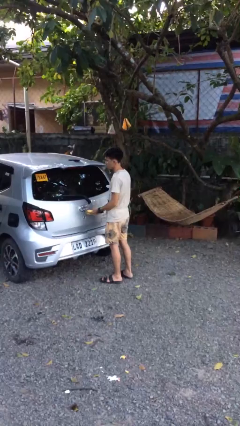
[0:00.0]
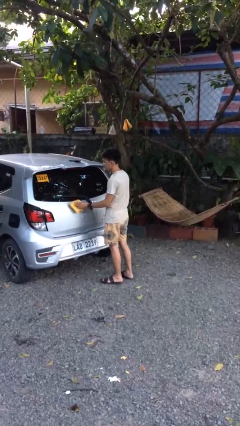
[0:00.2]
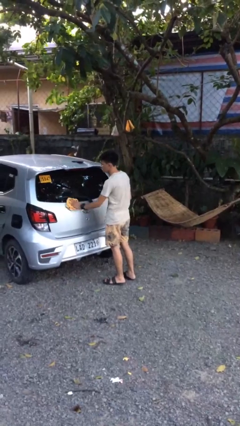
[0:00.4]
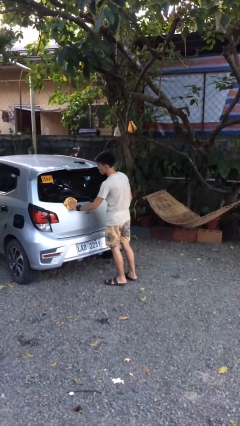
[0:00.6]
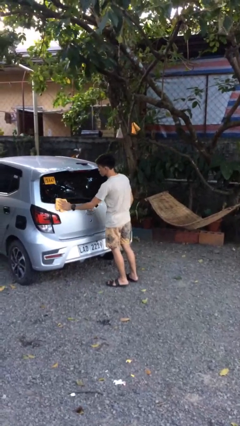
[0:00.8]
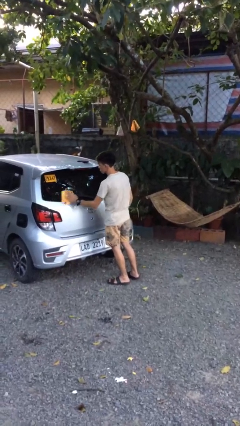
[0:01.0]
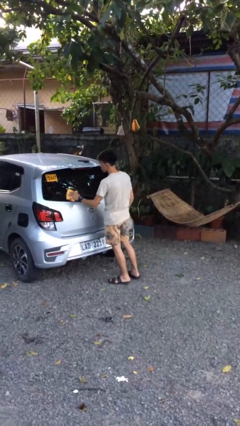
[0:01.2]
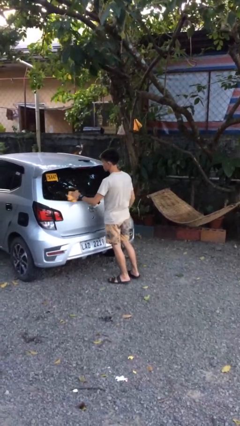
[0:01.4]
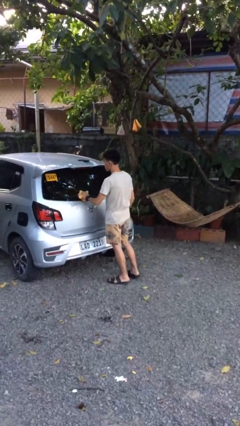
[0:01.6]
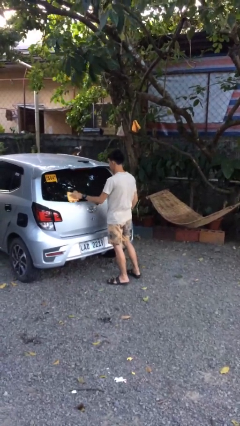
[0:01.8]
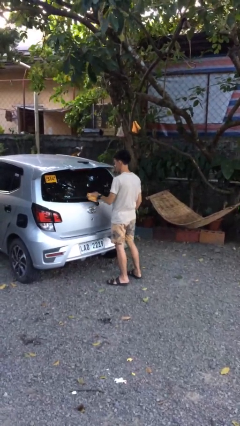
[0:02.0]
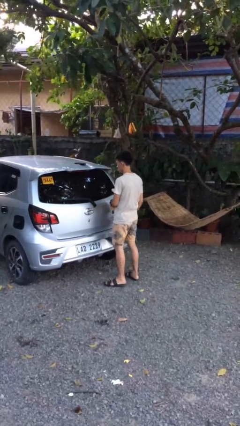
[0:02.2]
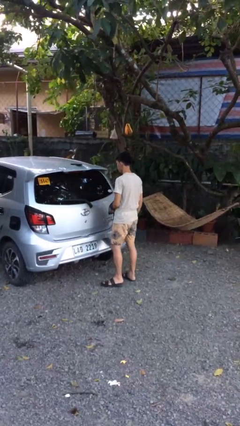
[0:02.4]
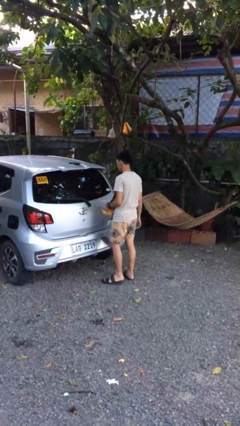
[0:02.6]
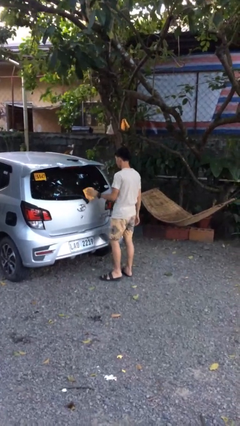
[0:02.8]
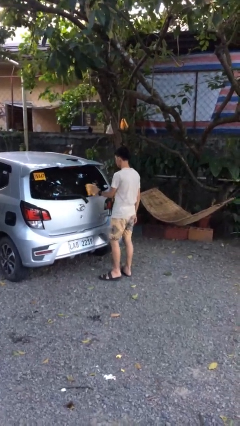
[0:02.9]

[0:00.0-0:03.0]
person polishes car with rag

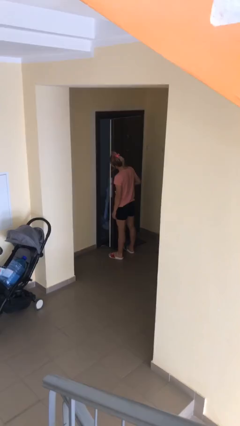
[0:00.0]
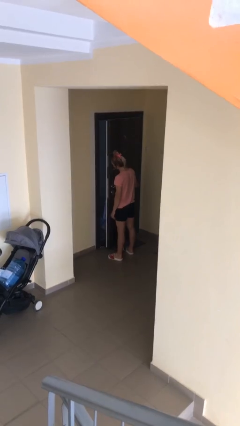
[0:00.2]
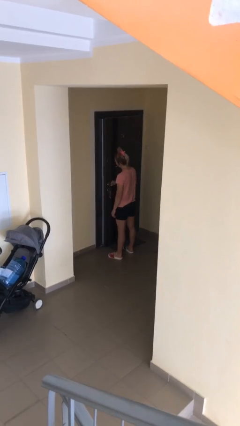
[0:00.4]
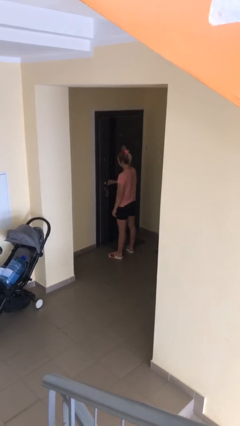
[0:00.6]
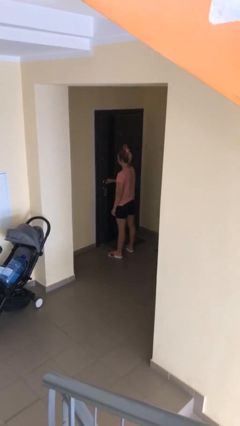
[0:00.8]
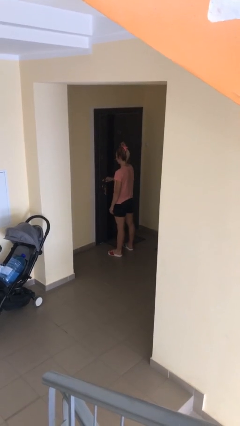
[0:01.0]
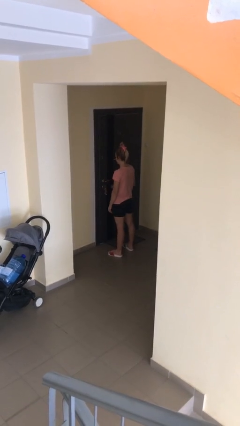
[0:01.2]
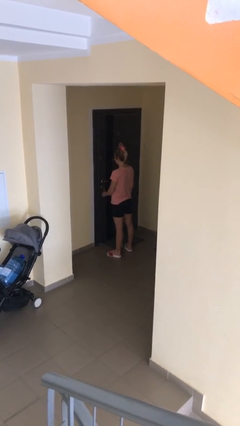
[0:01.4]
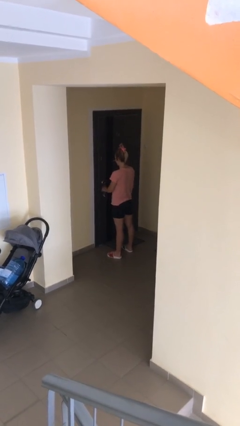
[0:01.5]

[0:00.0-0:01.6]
person closes facility door

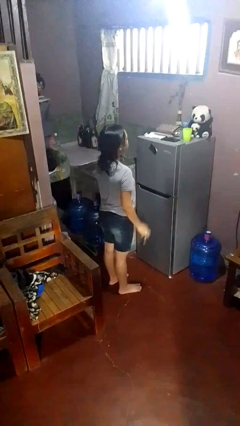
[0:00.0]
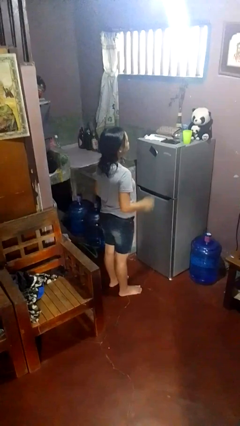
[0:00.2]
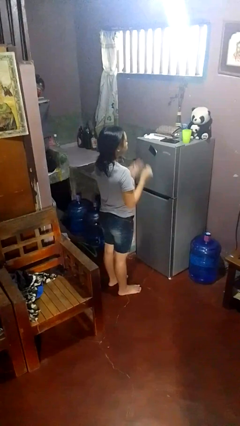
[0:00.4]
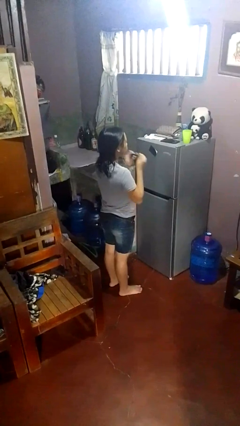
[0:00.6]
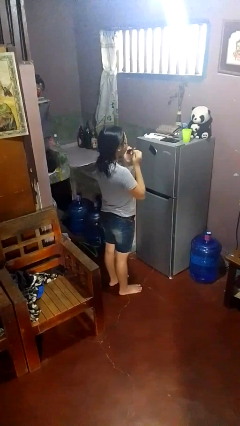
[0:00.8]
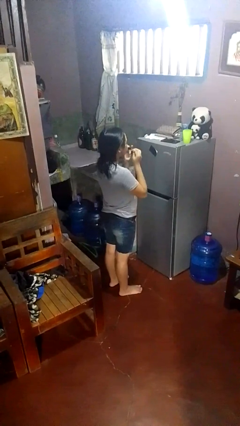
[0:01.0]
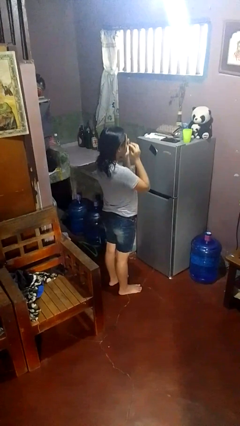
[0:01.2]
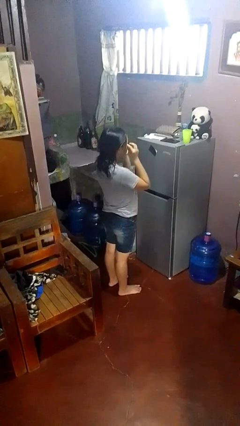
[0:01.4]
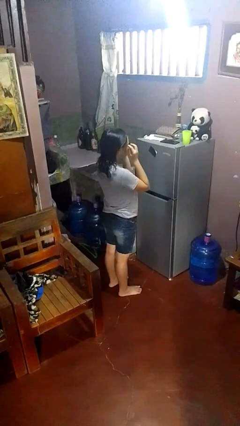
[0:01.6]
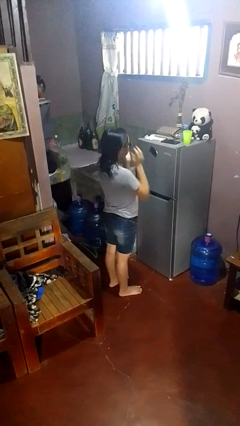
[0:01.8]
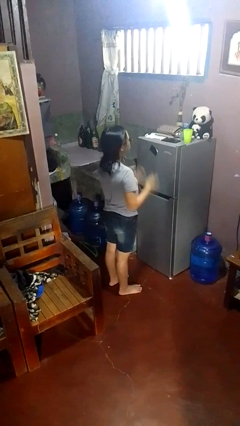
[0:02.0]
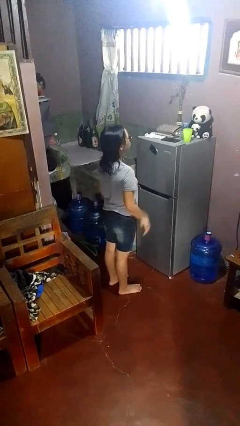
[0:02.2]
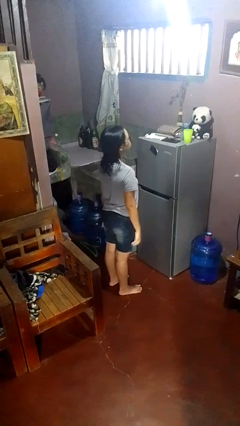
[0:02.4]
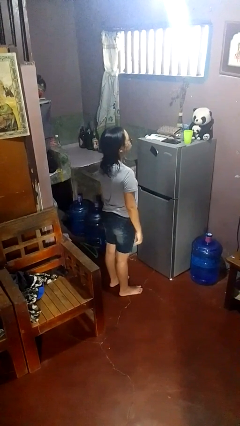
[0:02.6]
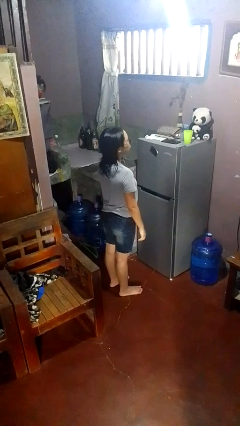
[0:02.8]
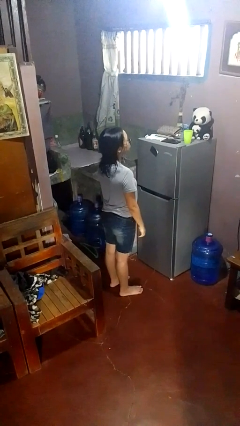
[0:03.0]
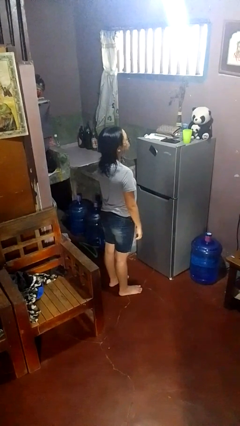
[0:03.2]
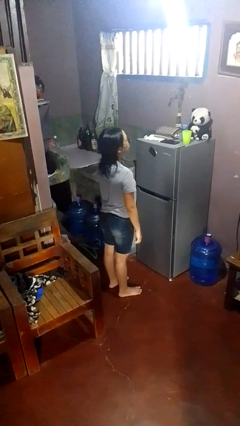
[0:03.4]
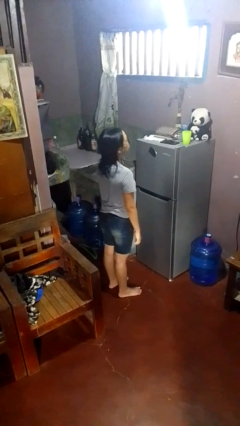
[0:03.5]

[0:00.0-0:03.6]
person puts on sunglasses

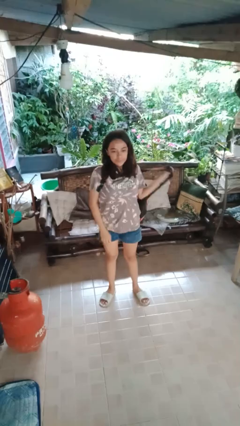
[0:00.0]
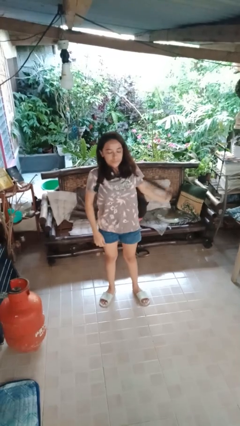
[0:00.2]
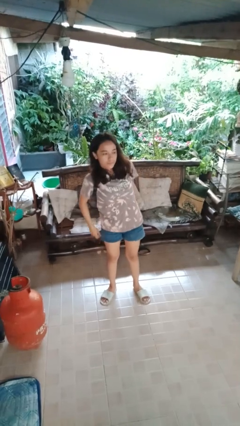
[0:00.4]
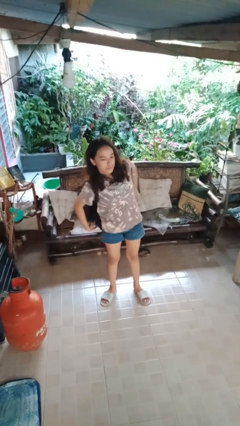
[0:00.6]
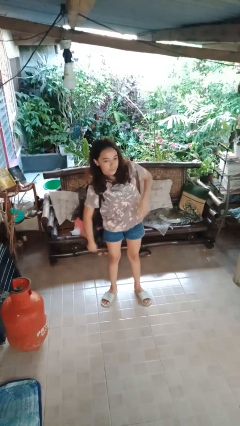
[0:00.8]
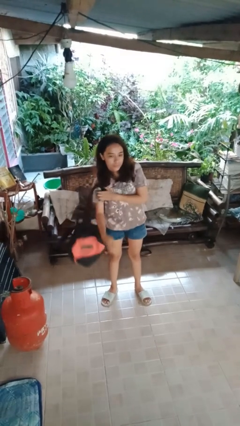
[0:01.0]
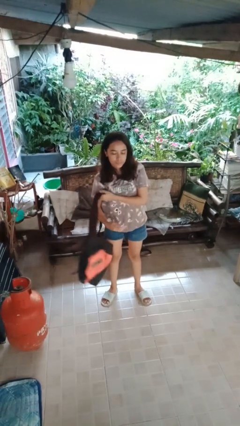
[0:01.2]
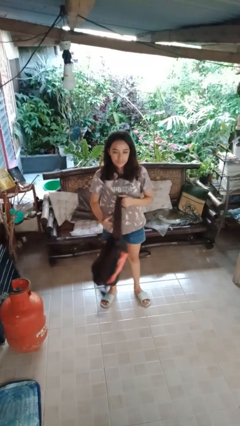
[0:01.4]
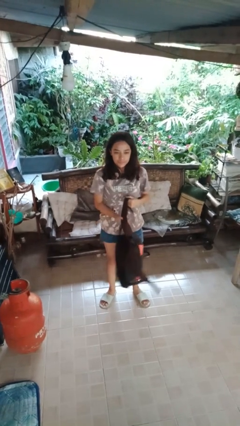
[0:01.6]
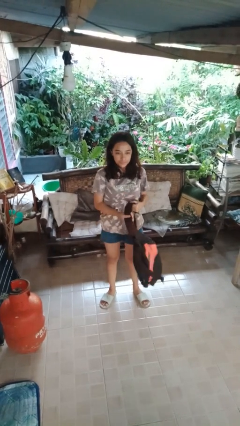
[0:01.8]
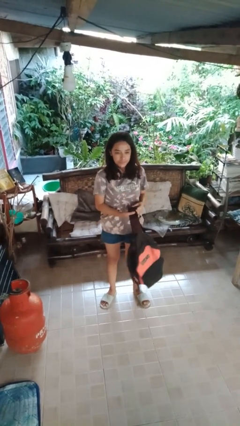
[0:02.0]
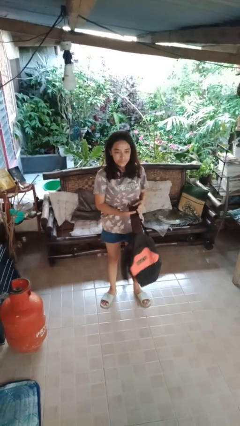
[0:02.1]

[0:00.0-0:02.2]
person takes off backpack

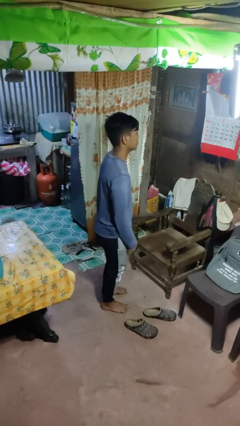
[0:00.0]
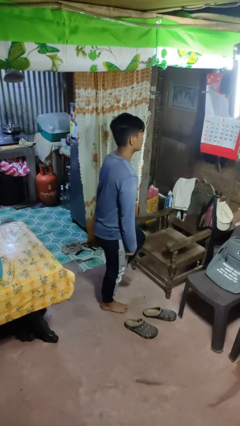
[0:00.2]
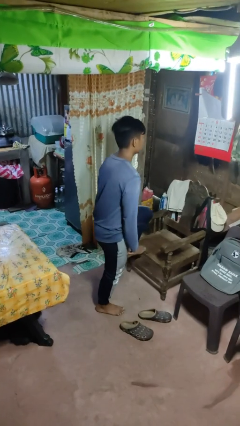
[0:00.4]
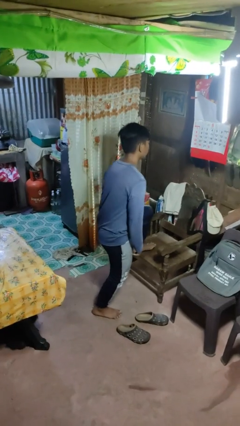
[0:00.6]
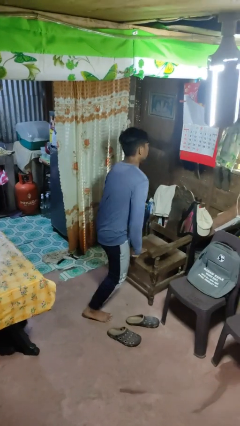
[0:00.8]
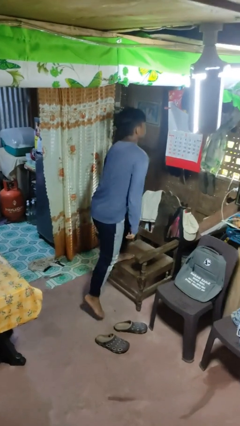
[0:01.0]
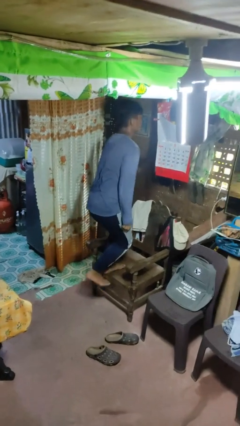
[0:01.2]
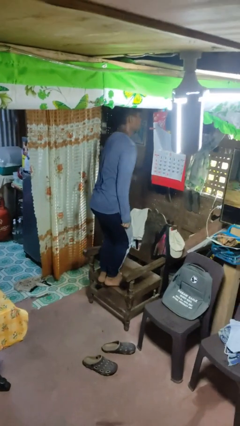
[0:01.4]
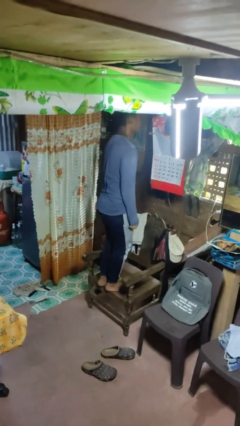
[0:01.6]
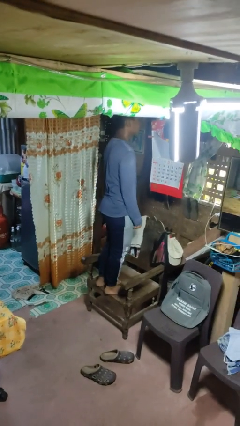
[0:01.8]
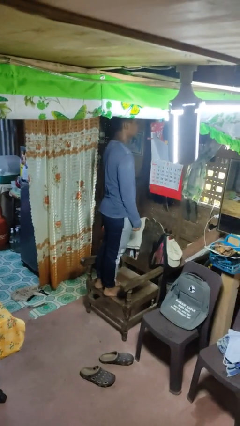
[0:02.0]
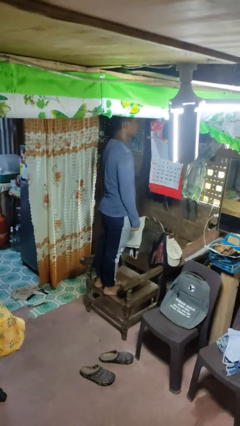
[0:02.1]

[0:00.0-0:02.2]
person climbs on chair

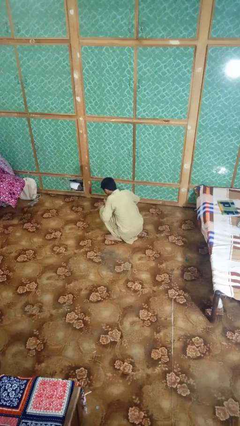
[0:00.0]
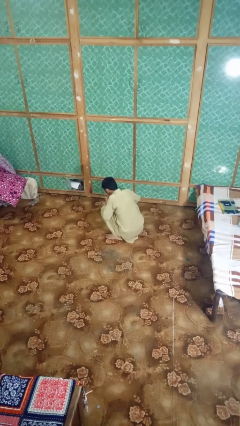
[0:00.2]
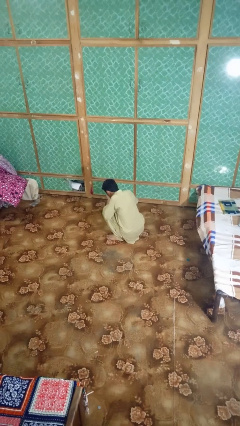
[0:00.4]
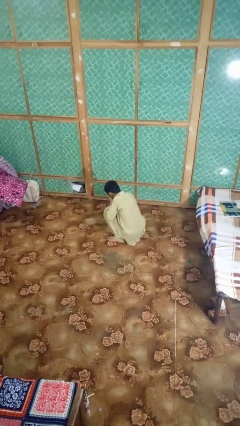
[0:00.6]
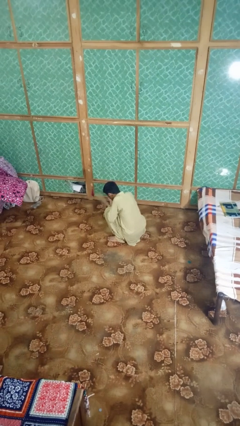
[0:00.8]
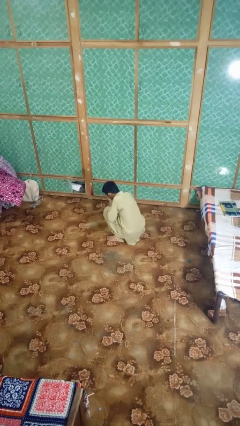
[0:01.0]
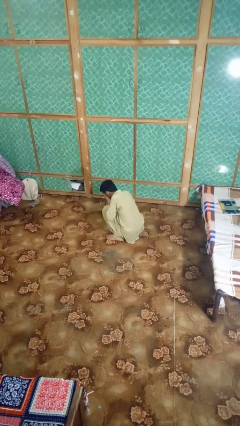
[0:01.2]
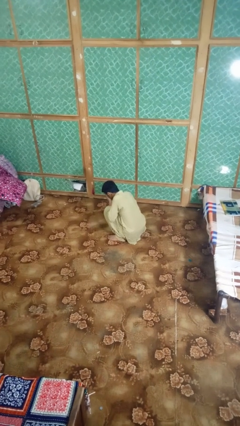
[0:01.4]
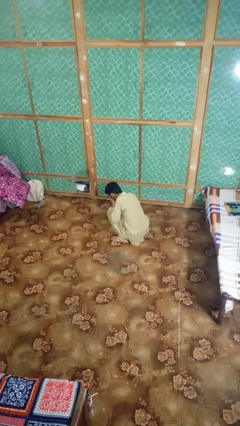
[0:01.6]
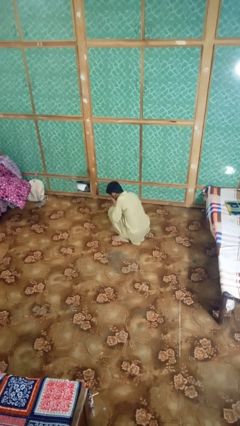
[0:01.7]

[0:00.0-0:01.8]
person yawns

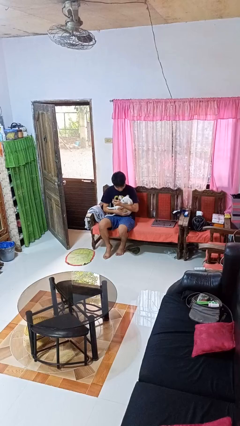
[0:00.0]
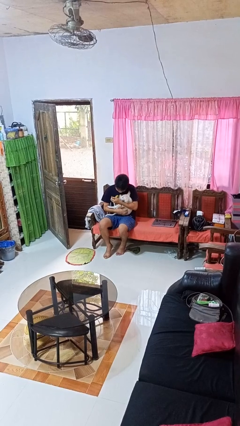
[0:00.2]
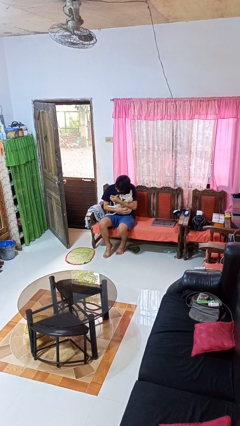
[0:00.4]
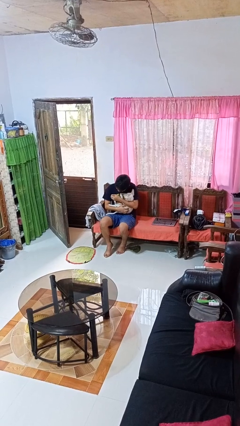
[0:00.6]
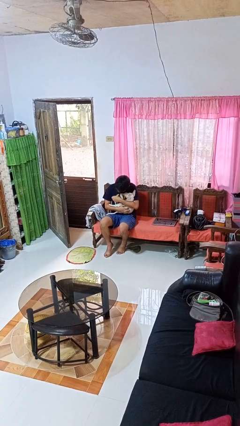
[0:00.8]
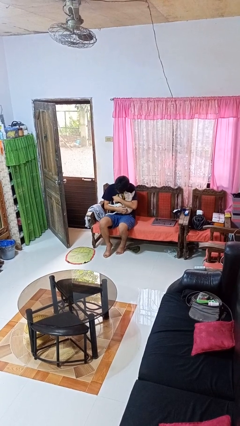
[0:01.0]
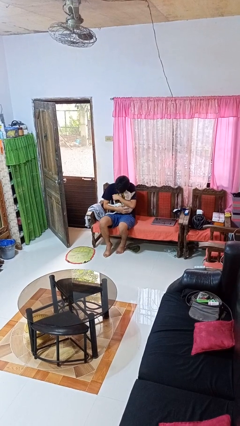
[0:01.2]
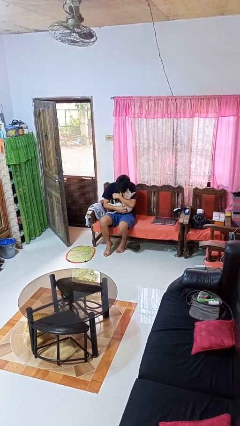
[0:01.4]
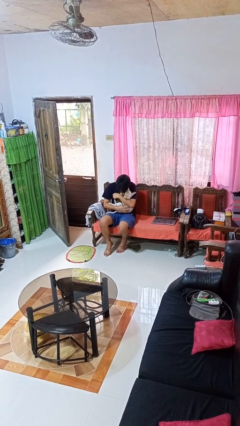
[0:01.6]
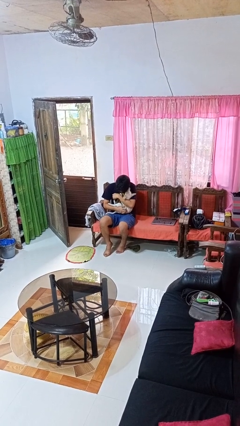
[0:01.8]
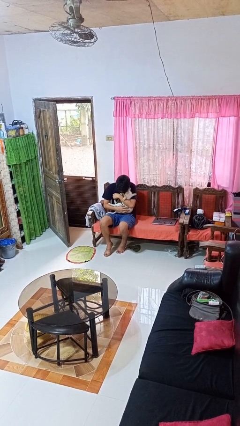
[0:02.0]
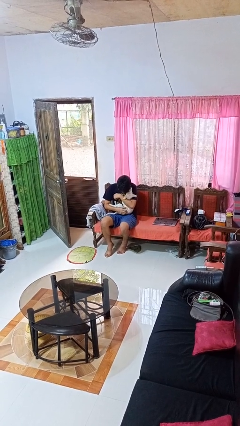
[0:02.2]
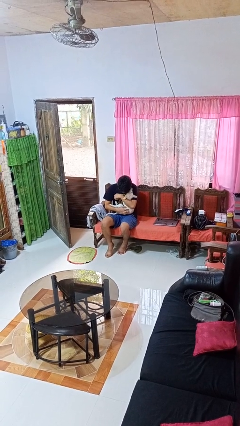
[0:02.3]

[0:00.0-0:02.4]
person hugs dog

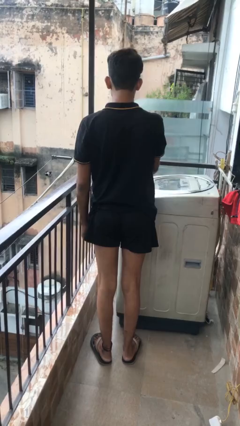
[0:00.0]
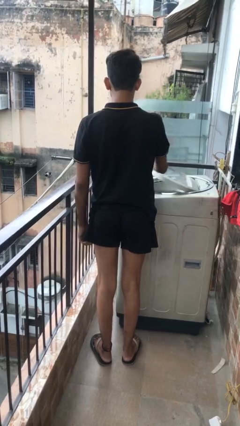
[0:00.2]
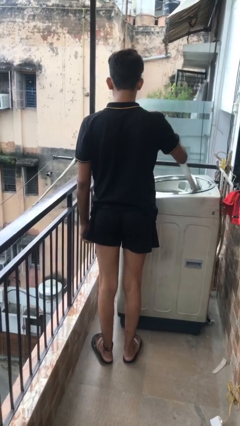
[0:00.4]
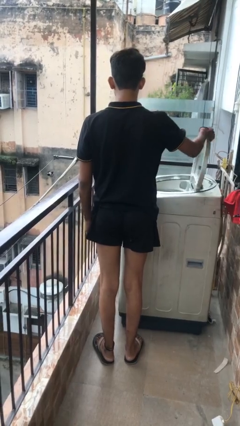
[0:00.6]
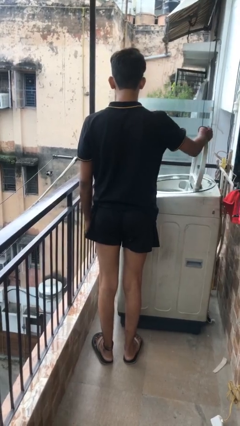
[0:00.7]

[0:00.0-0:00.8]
person opens clothes washer
